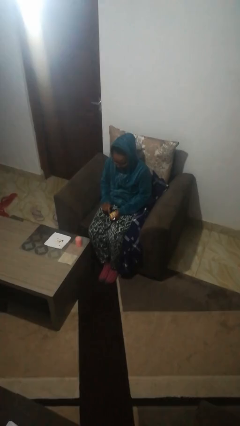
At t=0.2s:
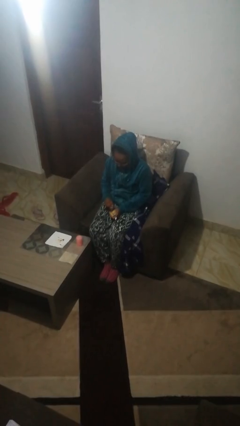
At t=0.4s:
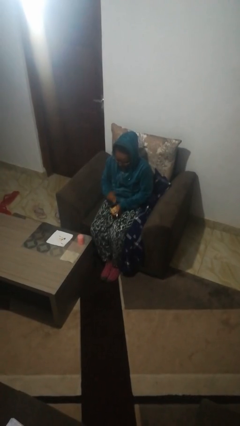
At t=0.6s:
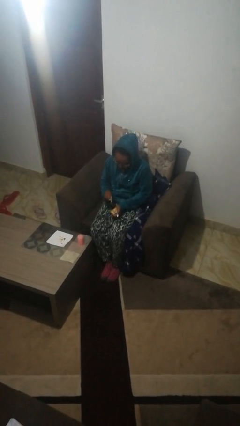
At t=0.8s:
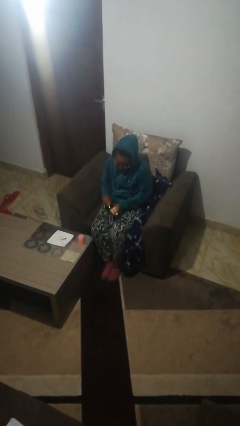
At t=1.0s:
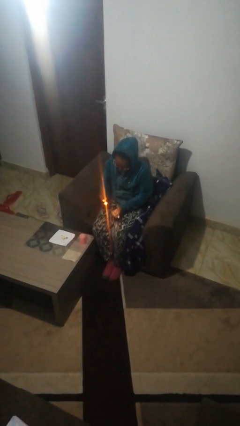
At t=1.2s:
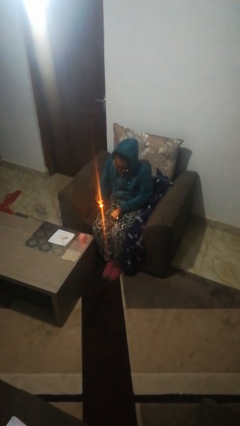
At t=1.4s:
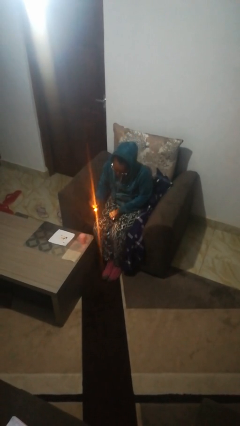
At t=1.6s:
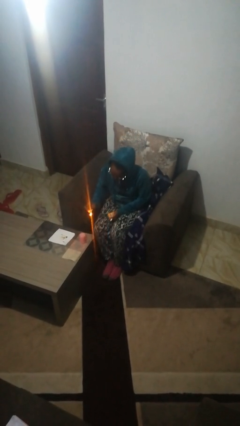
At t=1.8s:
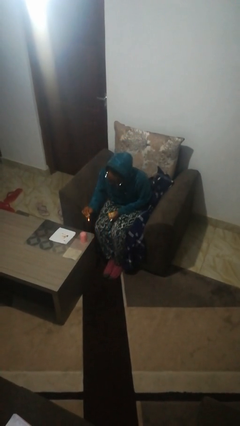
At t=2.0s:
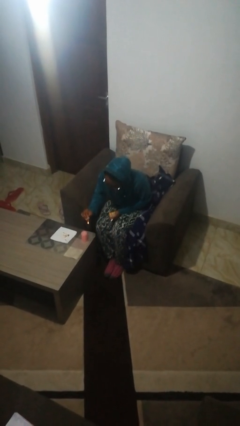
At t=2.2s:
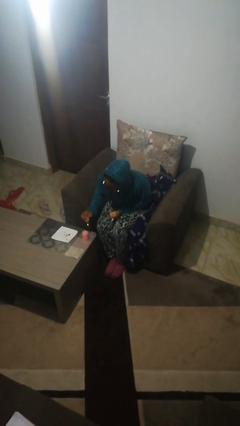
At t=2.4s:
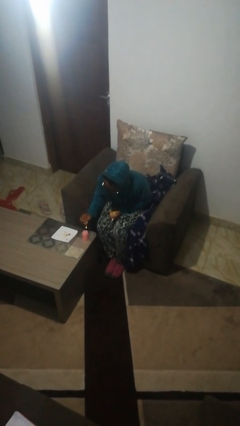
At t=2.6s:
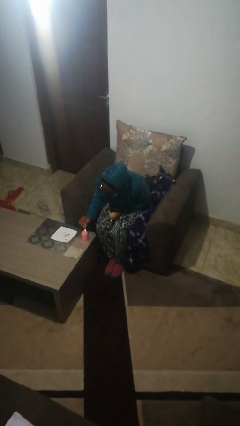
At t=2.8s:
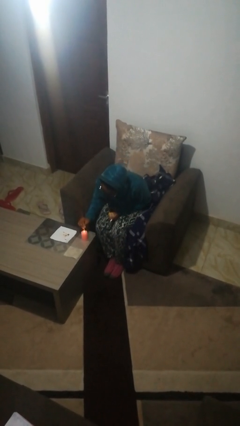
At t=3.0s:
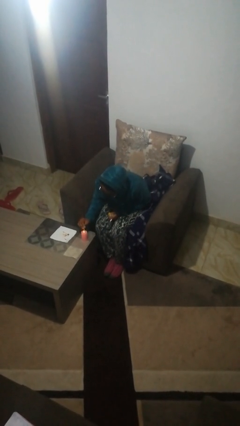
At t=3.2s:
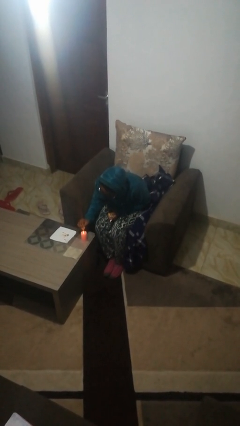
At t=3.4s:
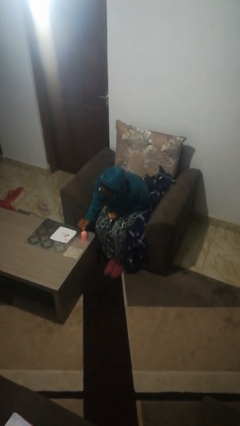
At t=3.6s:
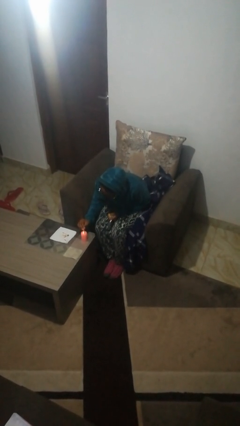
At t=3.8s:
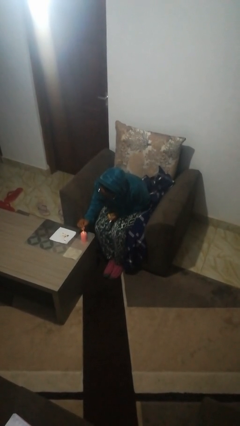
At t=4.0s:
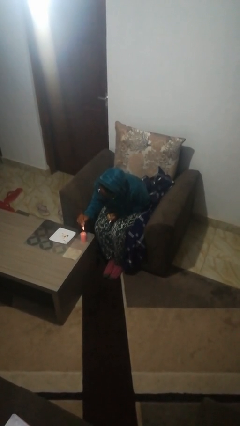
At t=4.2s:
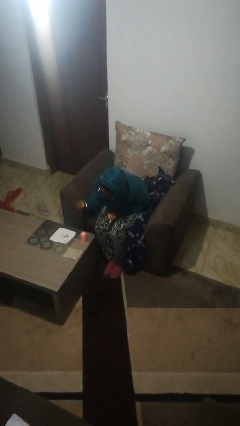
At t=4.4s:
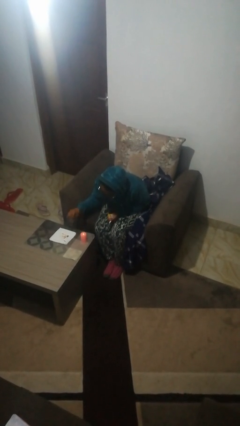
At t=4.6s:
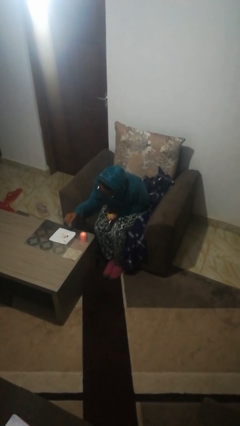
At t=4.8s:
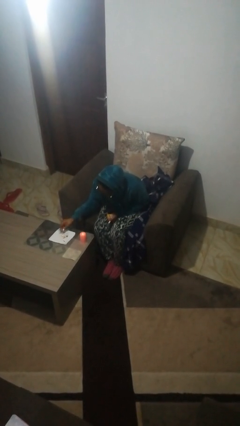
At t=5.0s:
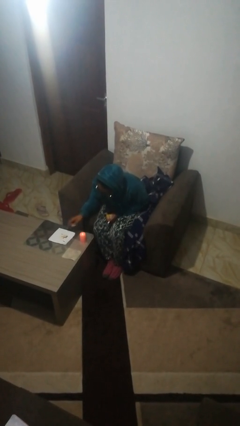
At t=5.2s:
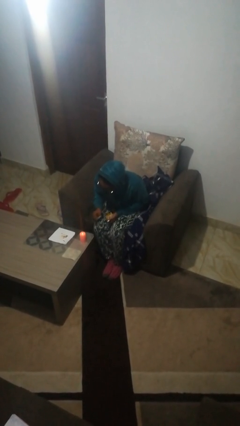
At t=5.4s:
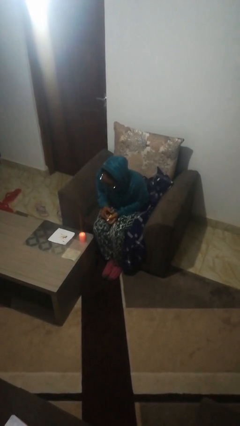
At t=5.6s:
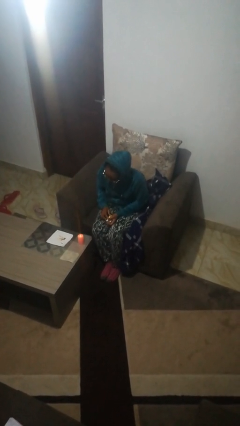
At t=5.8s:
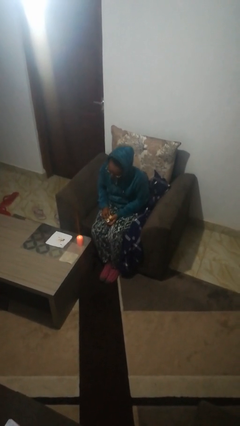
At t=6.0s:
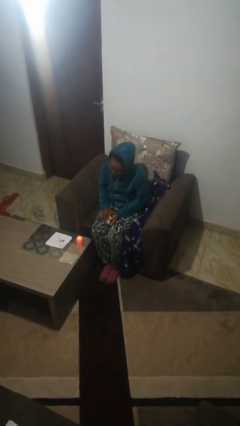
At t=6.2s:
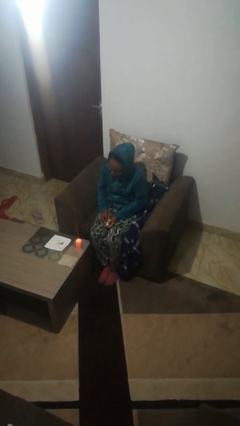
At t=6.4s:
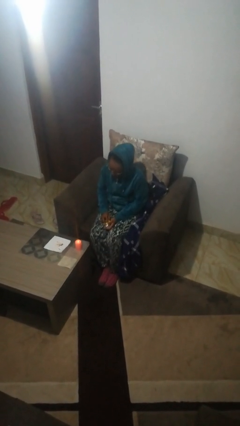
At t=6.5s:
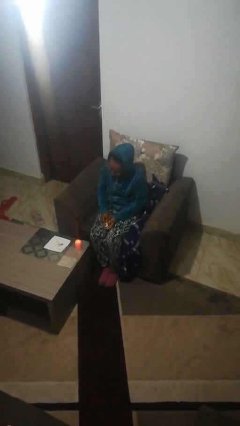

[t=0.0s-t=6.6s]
person lights candle

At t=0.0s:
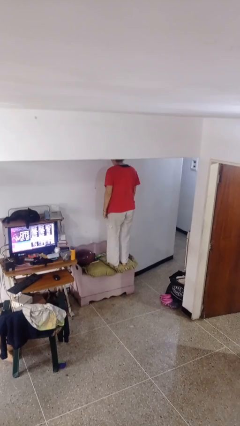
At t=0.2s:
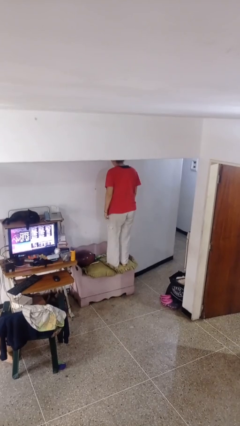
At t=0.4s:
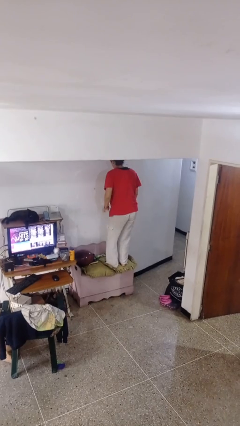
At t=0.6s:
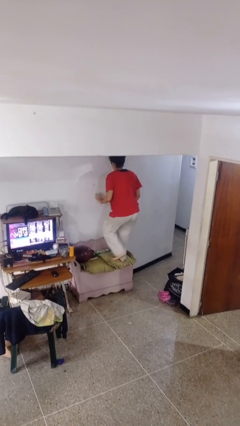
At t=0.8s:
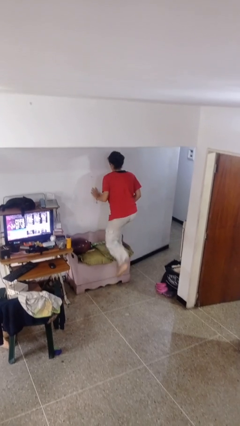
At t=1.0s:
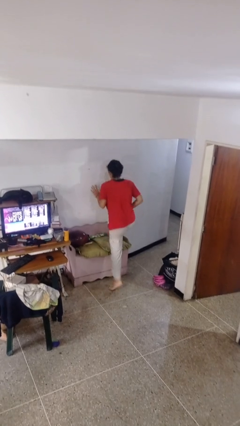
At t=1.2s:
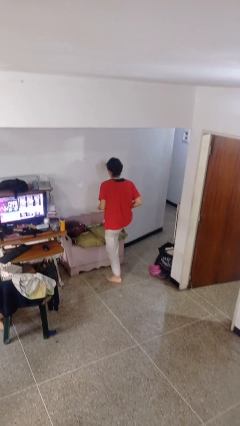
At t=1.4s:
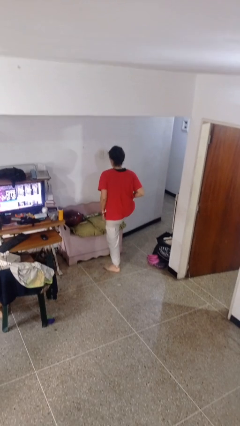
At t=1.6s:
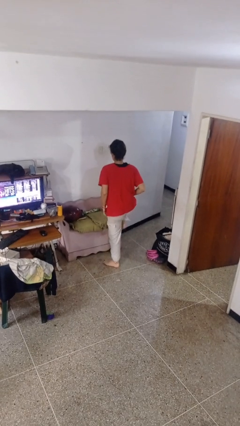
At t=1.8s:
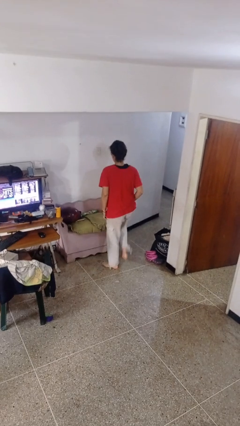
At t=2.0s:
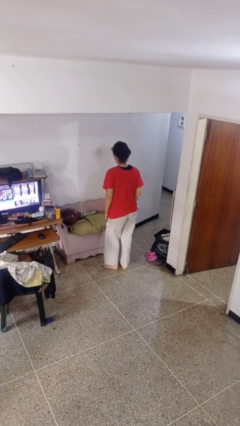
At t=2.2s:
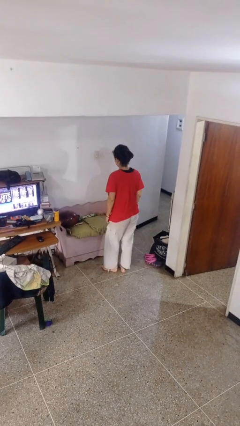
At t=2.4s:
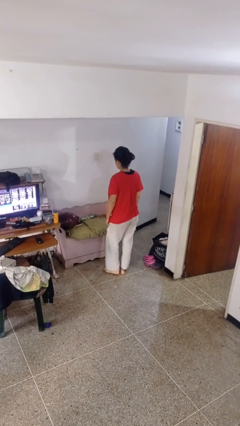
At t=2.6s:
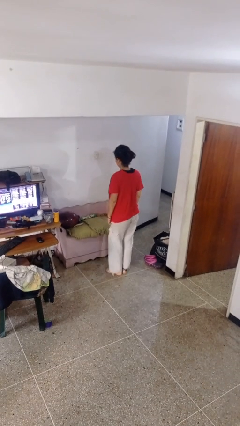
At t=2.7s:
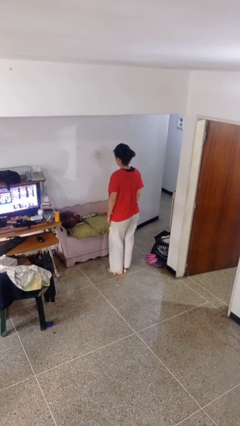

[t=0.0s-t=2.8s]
person climbs off couch

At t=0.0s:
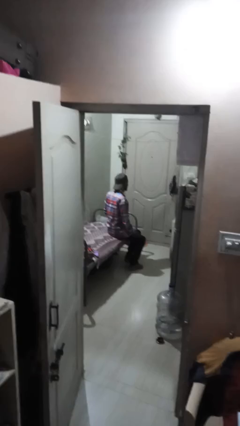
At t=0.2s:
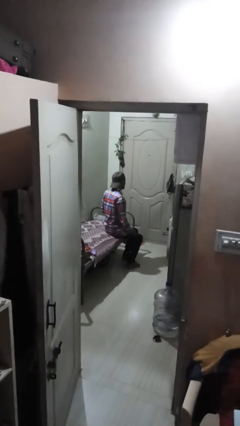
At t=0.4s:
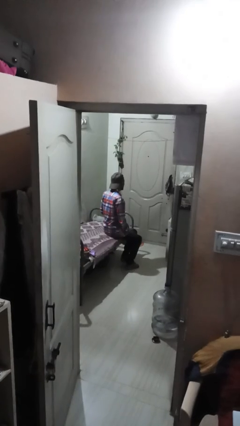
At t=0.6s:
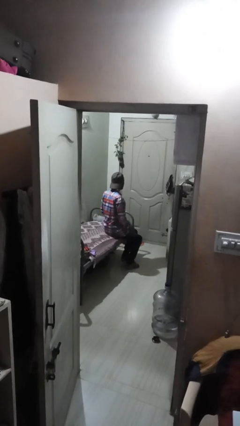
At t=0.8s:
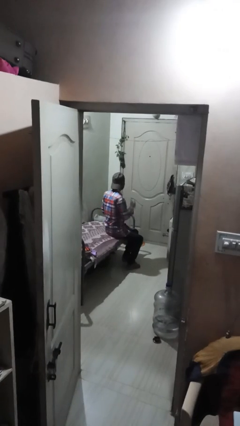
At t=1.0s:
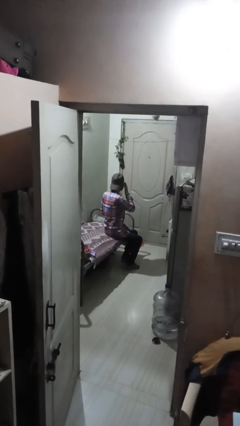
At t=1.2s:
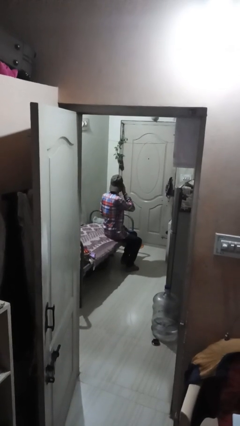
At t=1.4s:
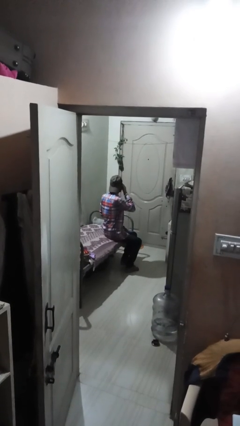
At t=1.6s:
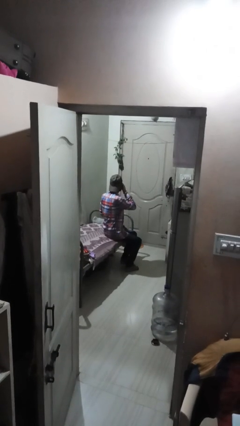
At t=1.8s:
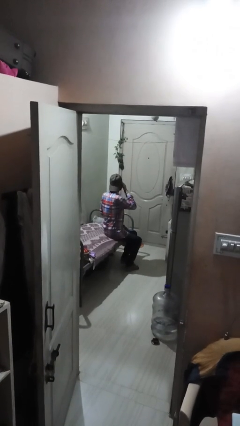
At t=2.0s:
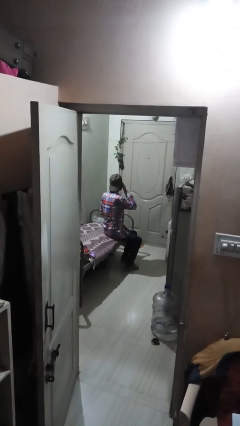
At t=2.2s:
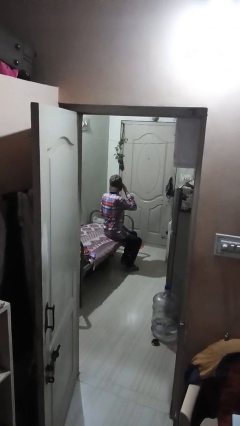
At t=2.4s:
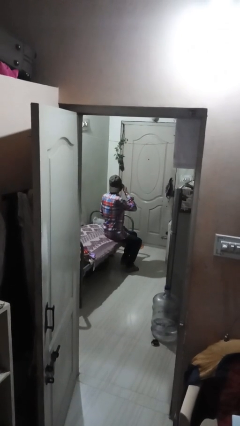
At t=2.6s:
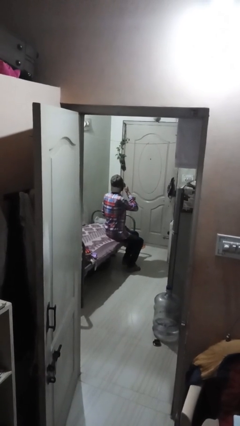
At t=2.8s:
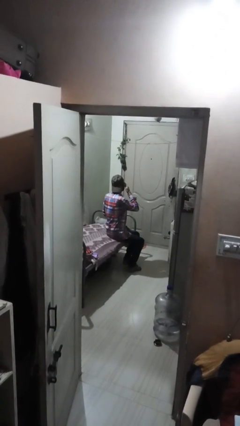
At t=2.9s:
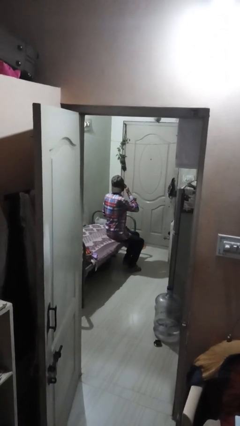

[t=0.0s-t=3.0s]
person rubs eyes

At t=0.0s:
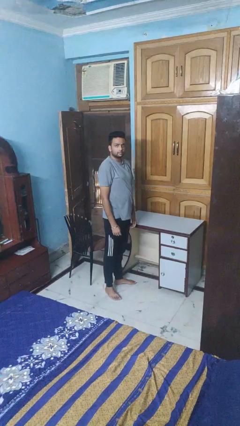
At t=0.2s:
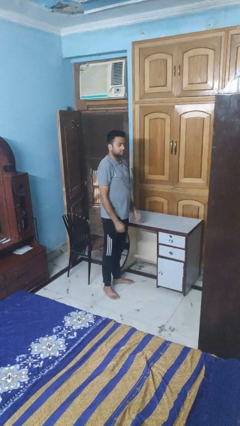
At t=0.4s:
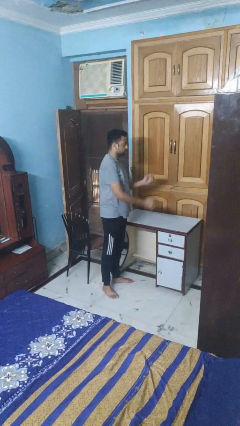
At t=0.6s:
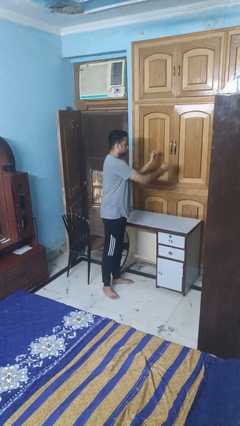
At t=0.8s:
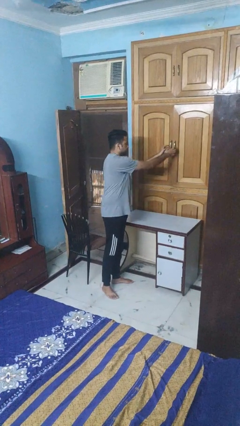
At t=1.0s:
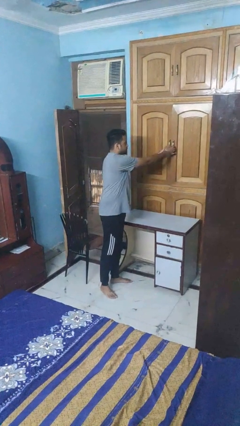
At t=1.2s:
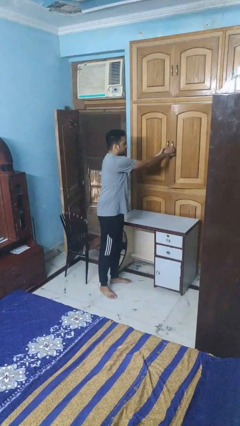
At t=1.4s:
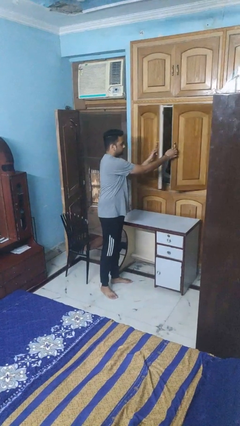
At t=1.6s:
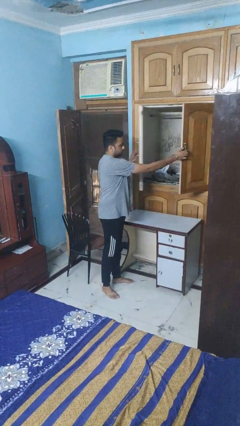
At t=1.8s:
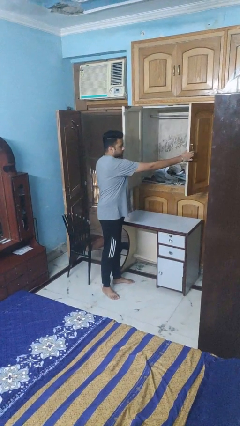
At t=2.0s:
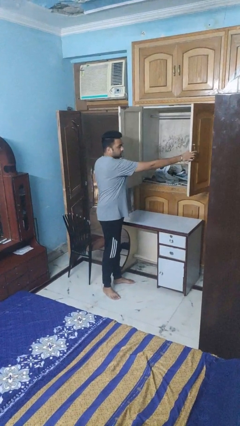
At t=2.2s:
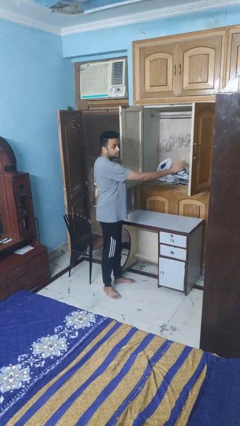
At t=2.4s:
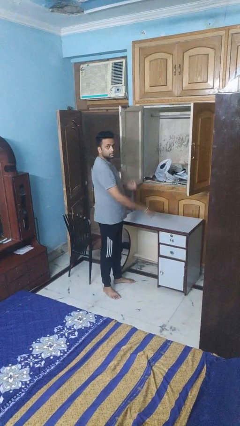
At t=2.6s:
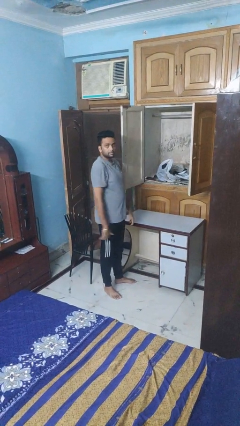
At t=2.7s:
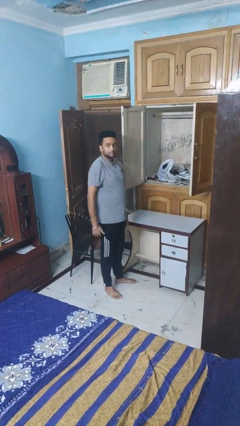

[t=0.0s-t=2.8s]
person opens closet door

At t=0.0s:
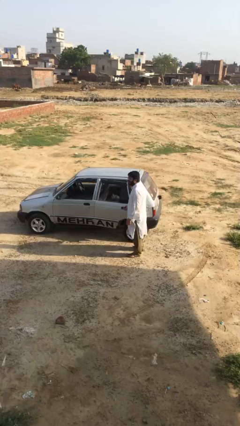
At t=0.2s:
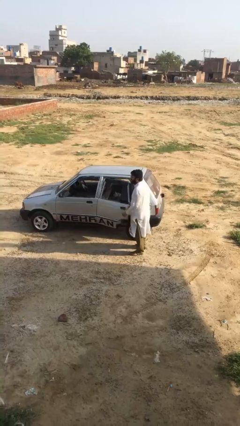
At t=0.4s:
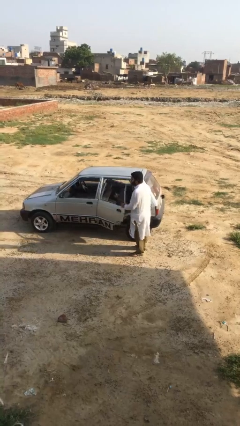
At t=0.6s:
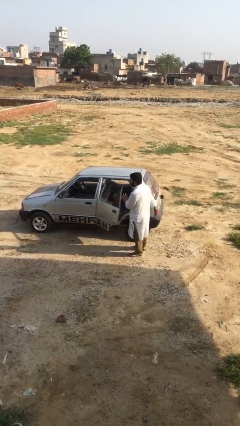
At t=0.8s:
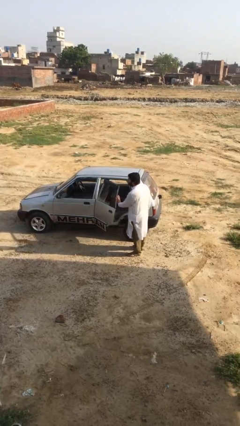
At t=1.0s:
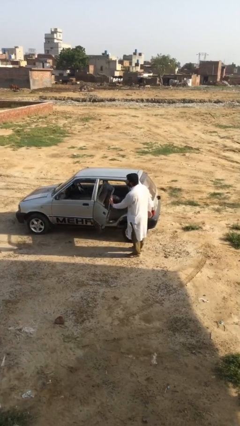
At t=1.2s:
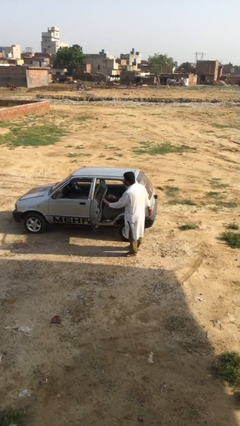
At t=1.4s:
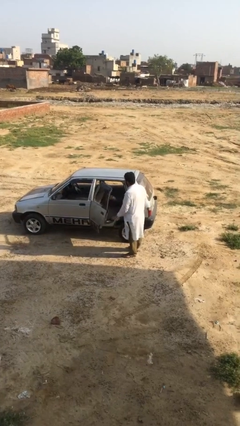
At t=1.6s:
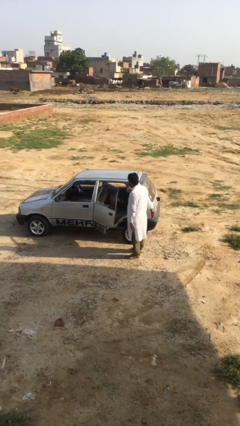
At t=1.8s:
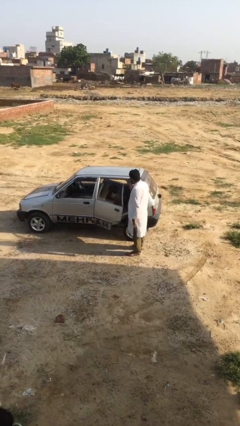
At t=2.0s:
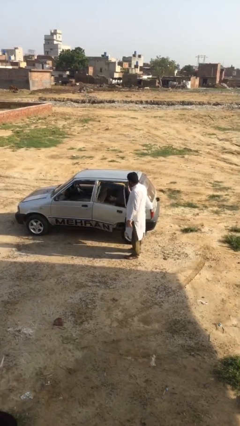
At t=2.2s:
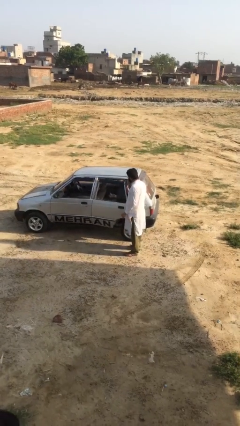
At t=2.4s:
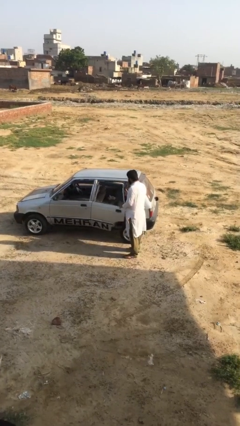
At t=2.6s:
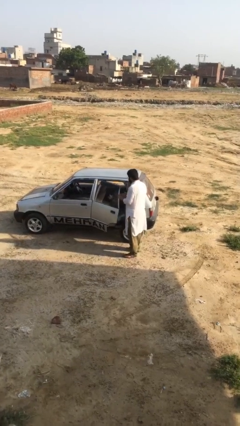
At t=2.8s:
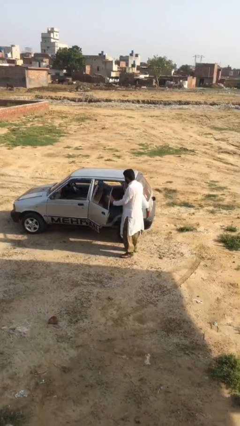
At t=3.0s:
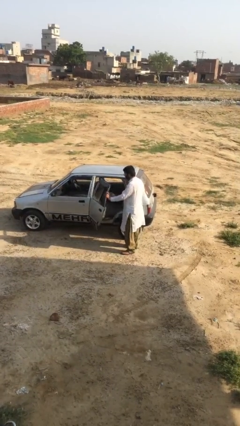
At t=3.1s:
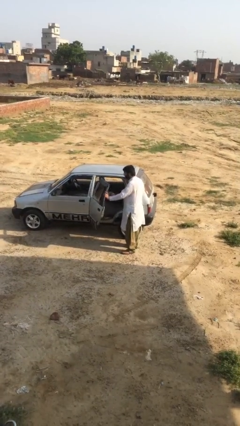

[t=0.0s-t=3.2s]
person opens car door
